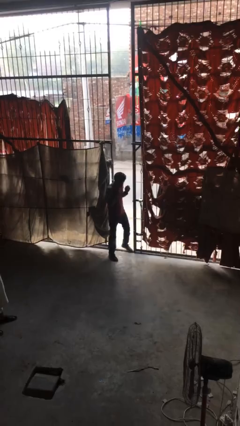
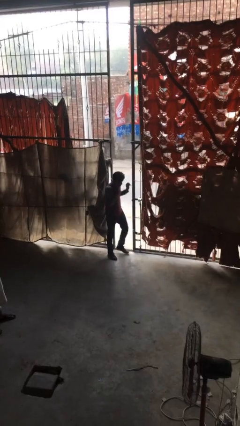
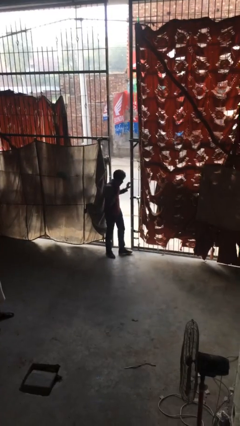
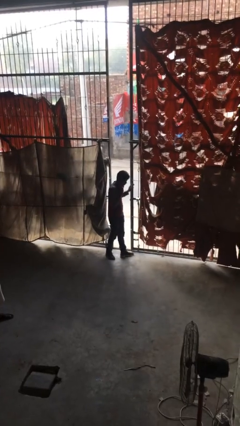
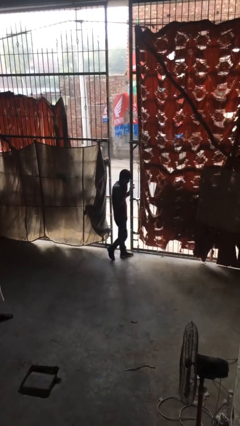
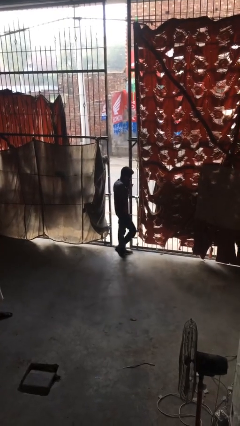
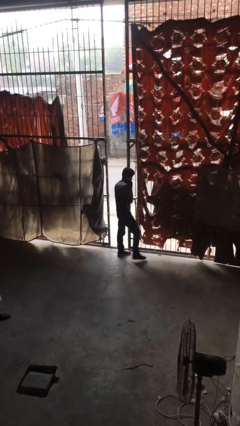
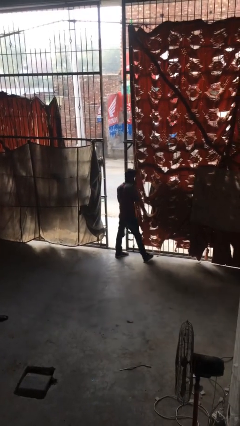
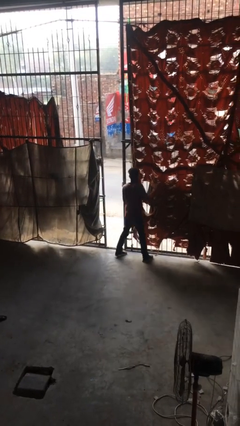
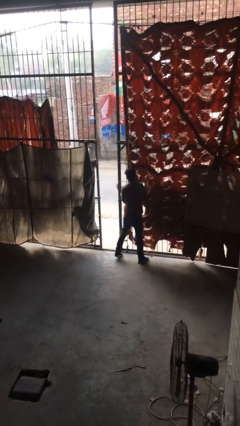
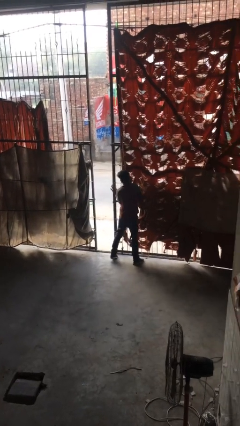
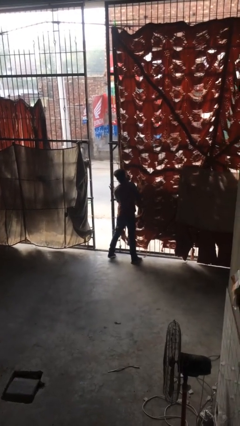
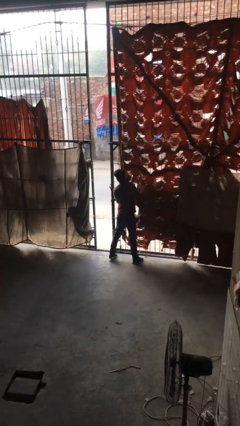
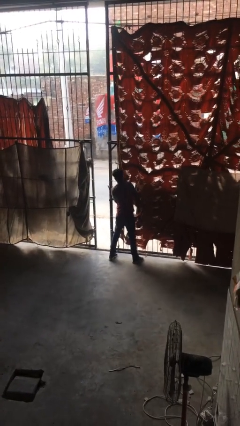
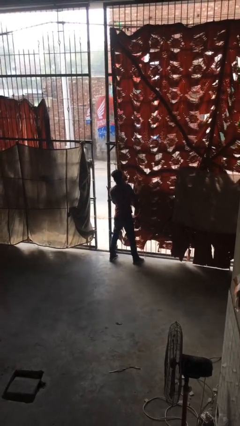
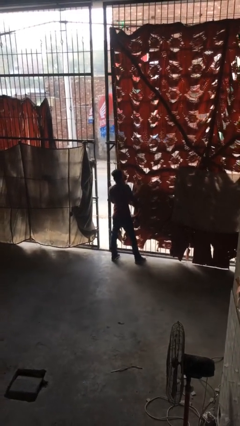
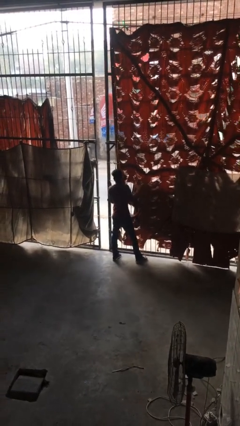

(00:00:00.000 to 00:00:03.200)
person enters scene through structure

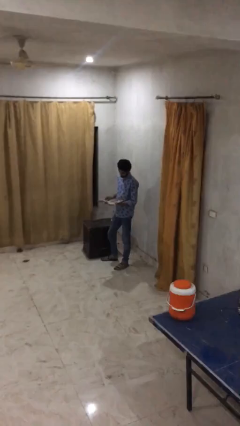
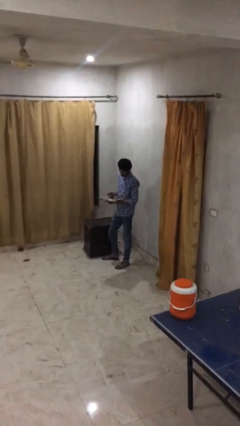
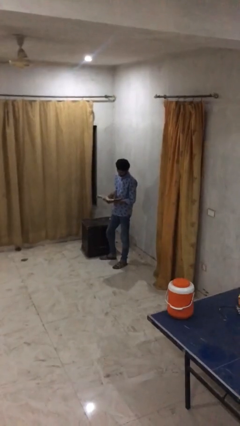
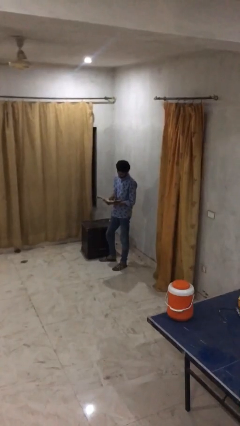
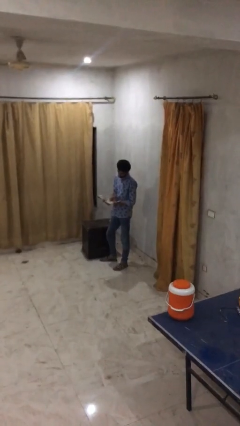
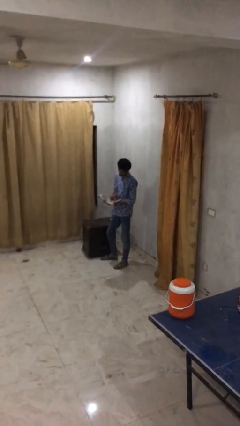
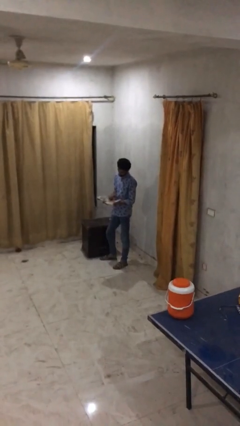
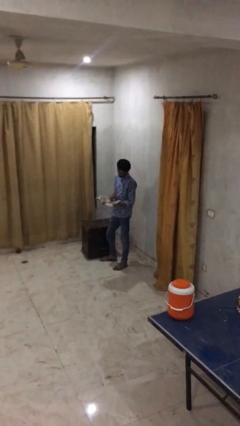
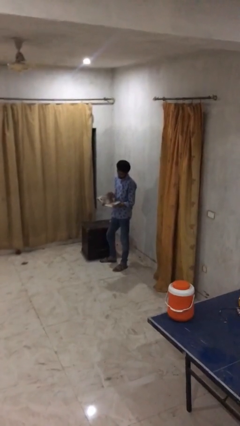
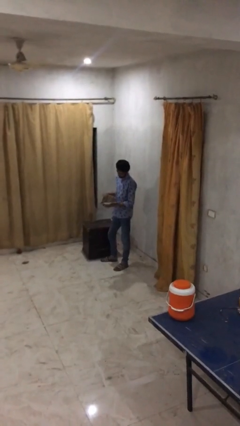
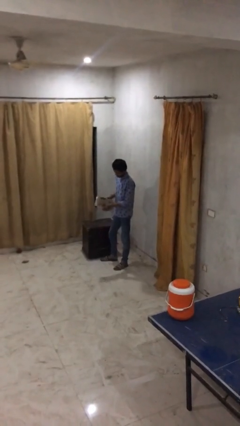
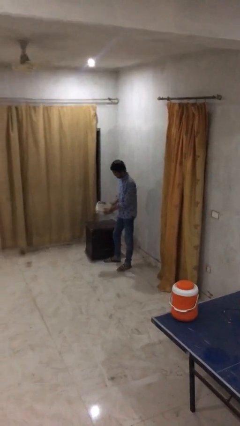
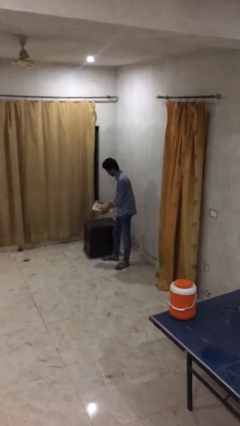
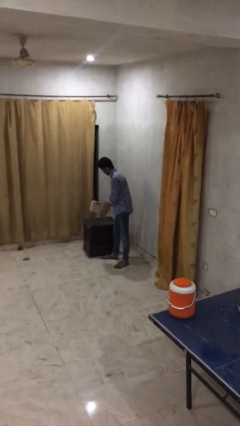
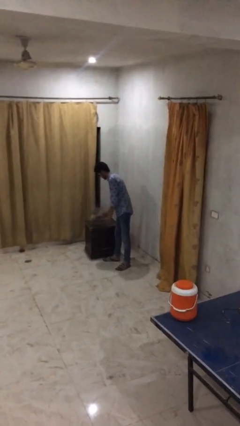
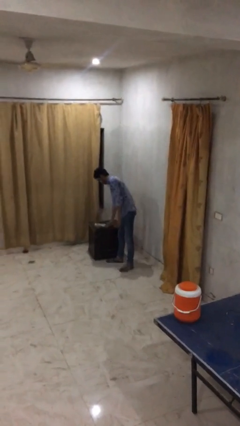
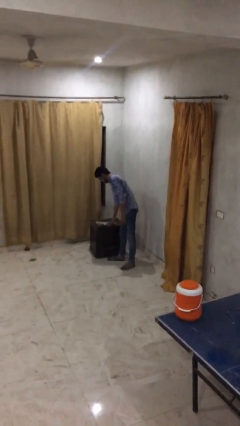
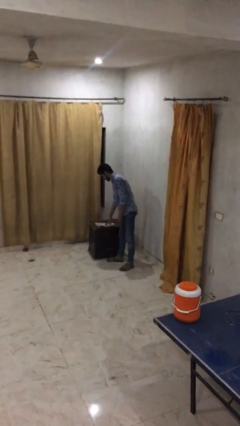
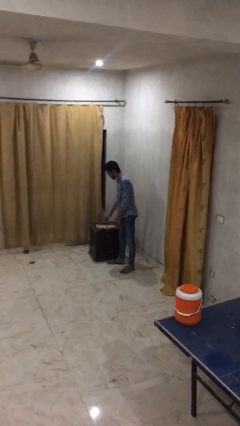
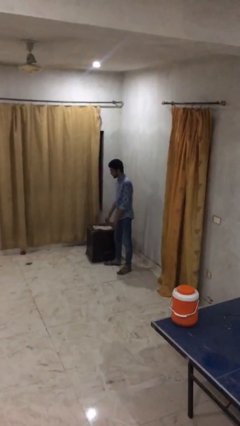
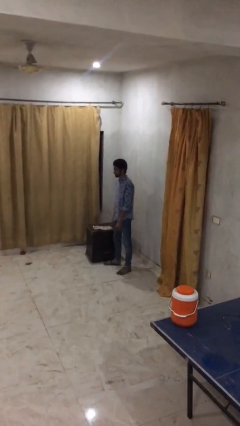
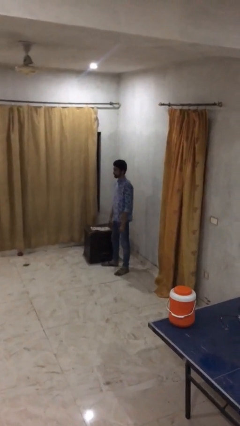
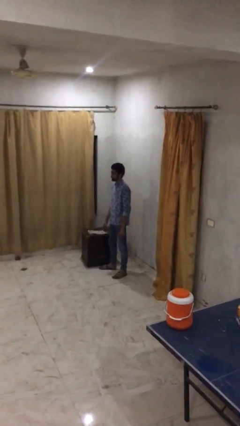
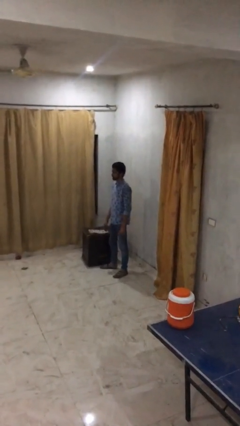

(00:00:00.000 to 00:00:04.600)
person puts down object on table

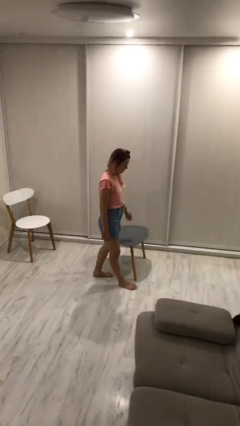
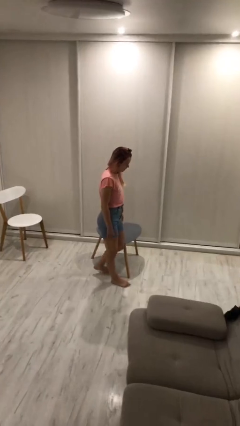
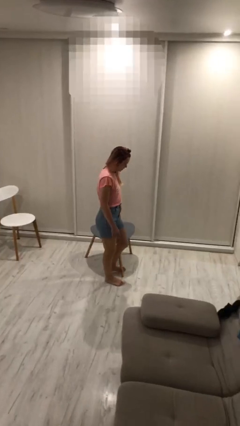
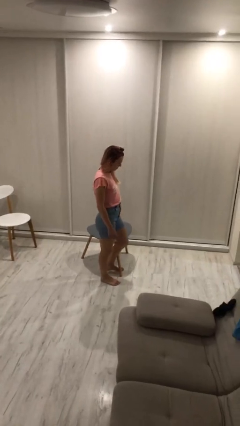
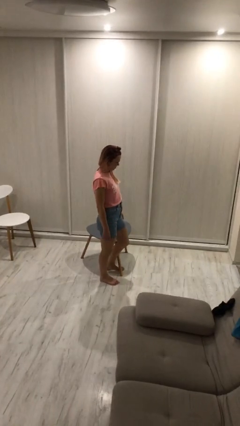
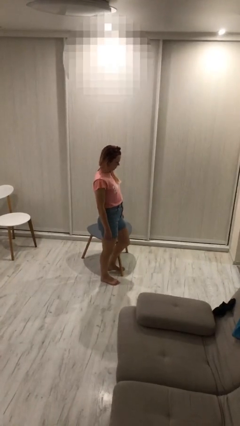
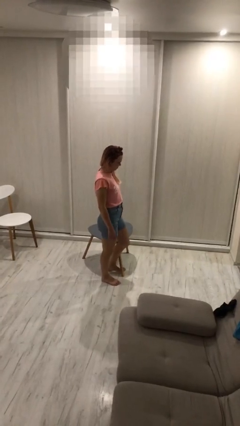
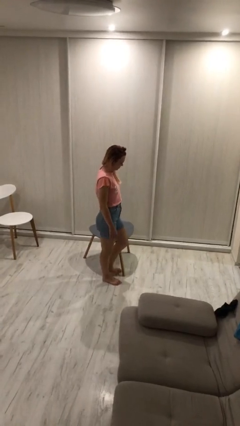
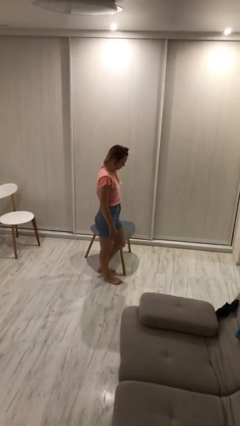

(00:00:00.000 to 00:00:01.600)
person stubs toe

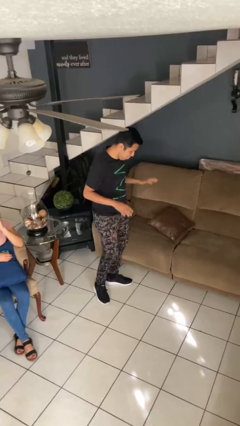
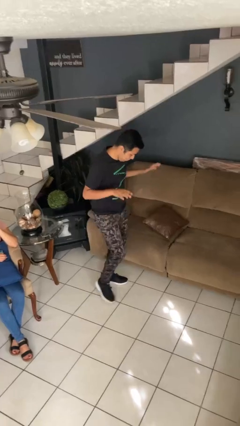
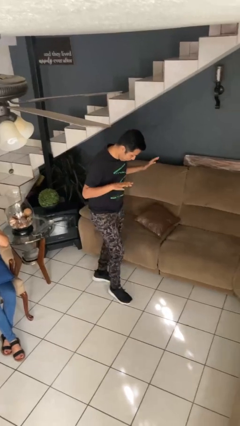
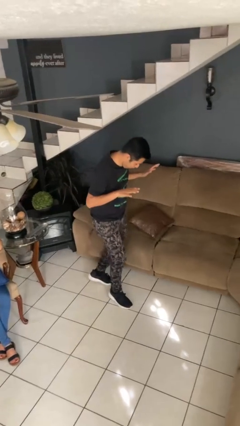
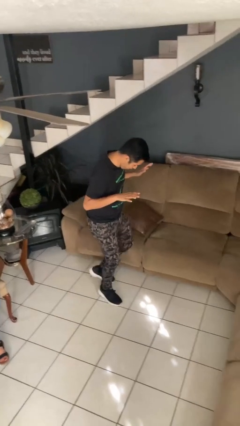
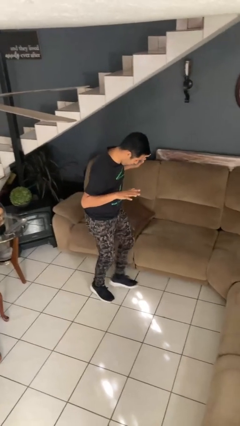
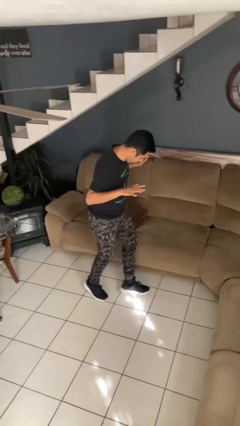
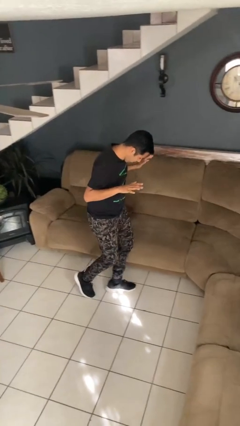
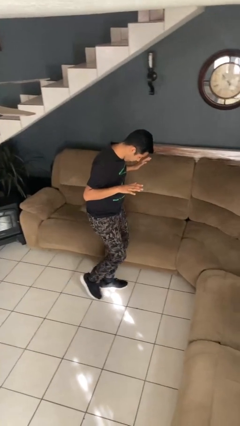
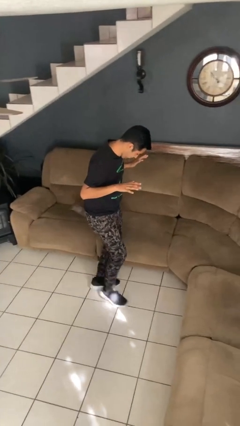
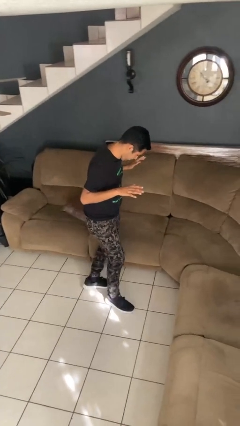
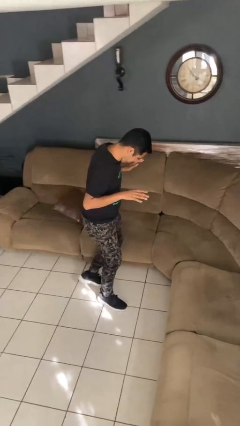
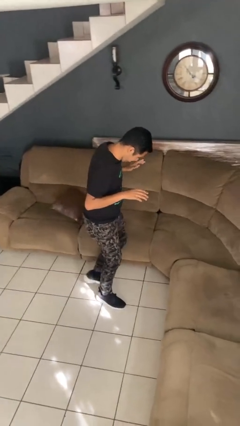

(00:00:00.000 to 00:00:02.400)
person walks tiptoe

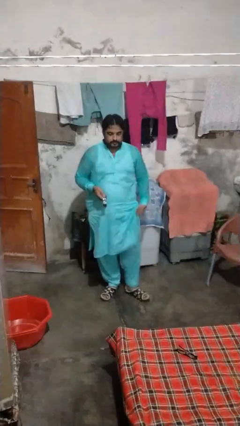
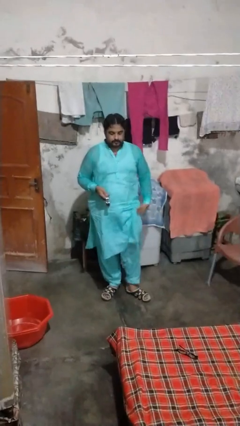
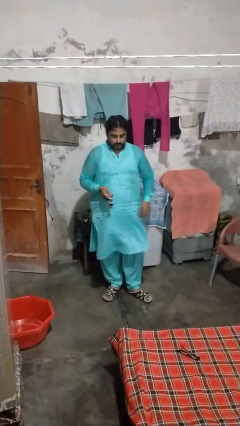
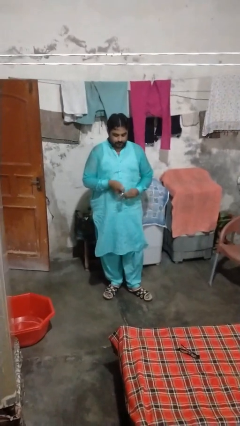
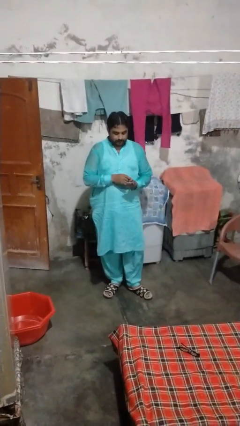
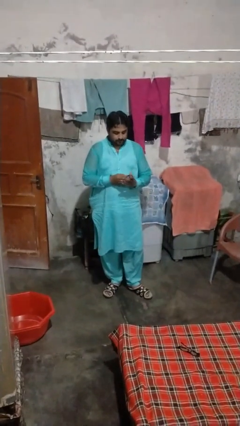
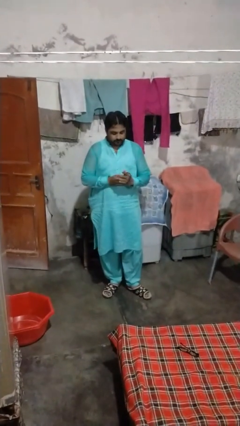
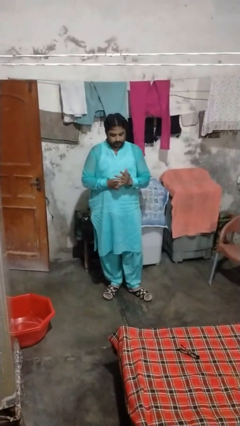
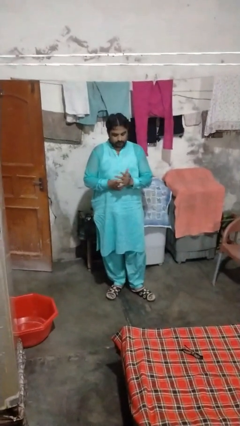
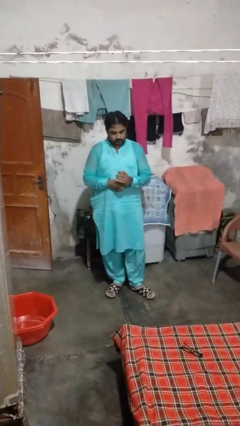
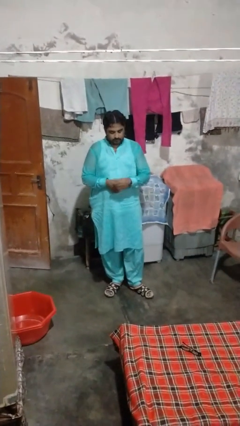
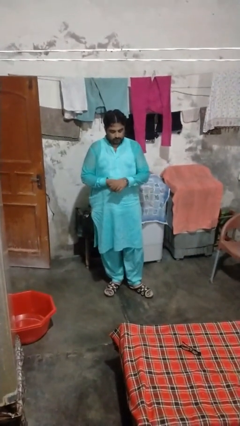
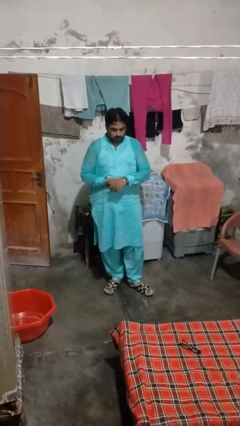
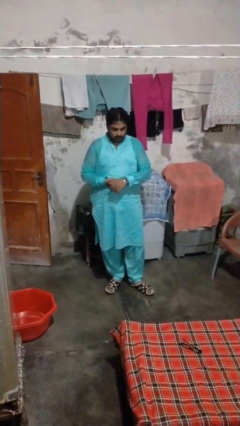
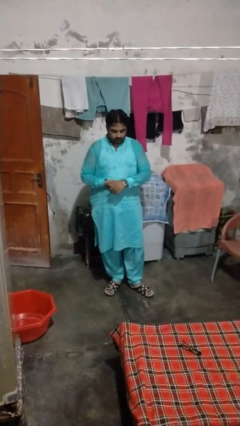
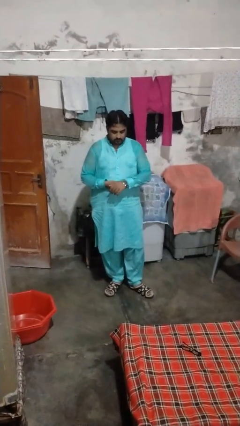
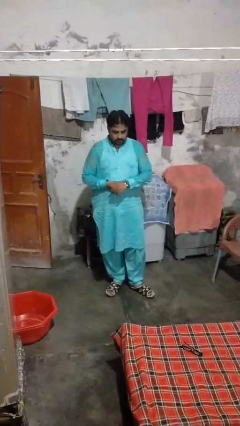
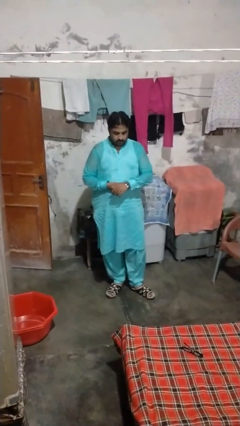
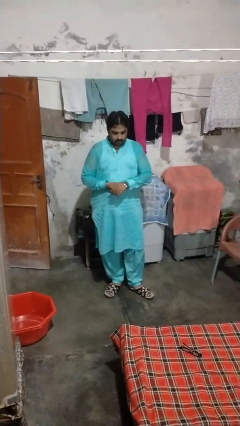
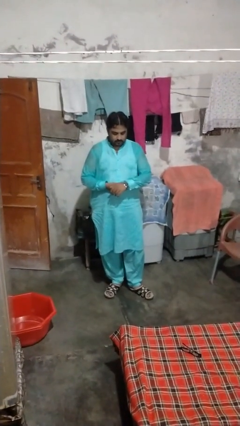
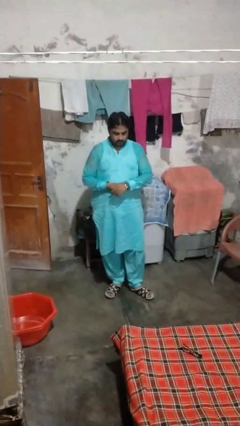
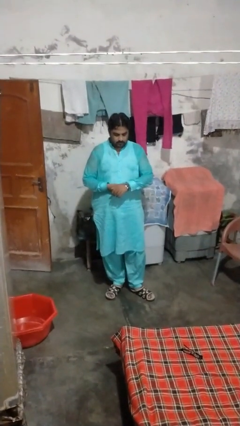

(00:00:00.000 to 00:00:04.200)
person puts on wristwatch

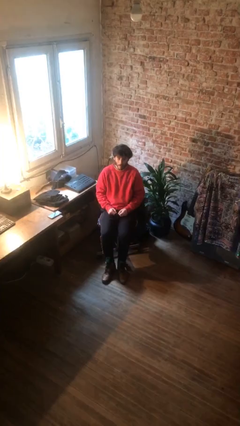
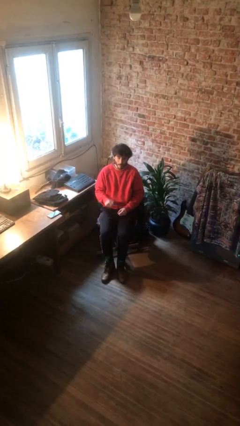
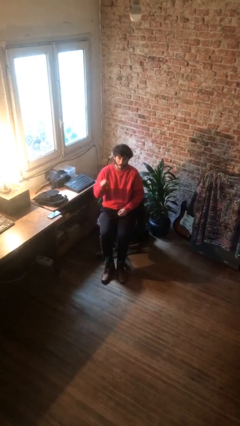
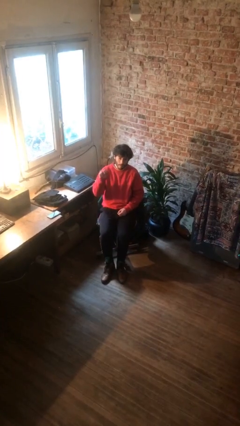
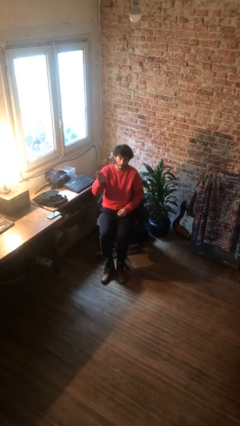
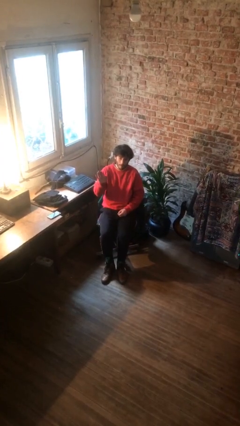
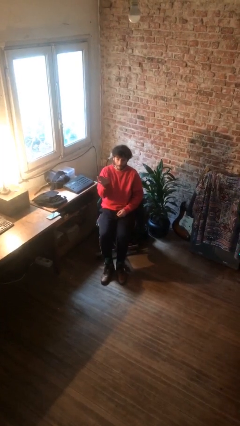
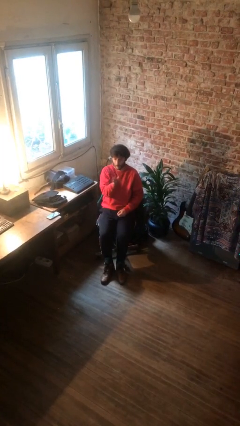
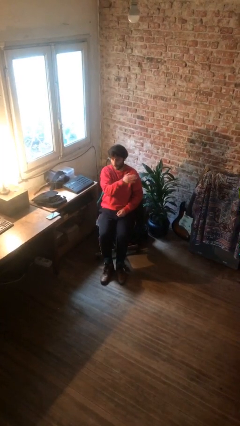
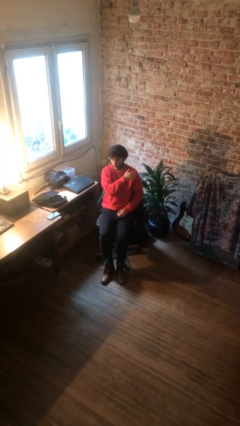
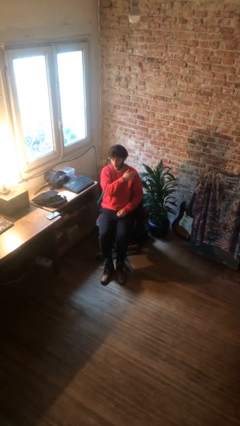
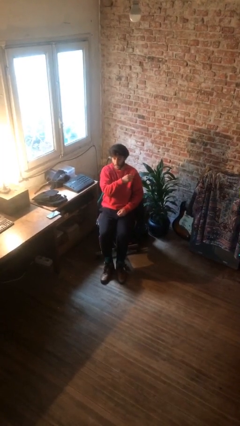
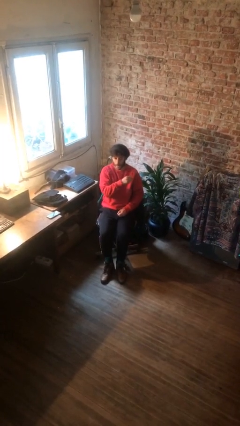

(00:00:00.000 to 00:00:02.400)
person gestures swipe left
